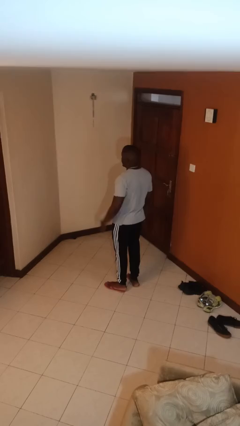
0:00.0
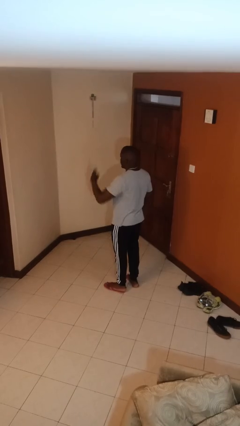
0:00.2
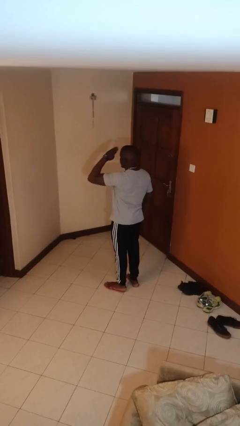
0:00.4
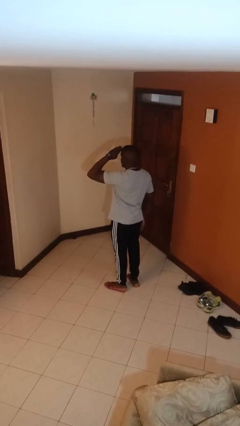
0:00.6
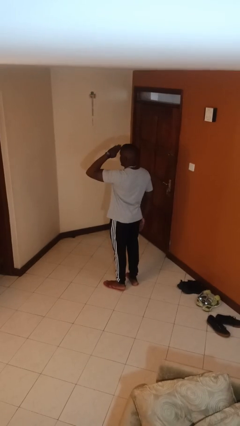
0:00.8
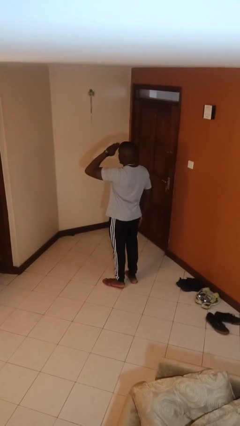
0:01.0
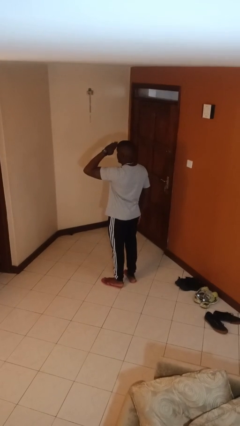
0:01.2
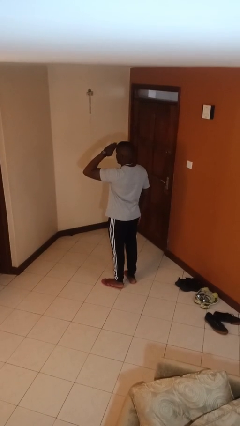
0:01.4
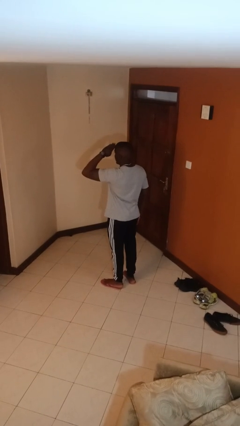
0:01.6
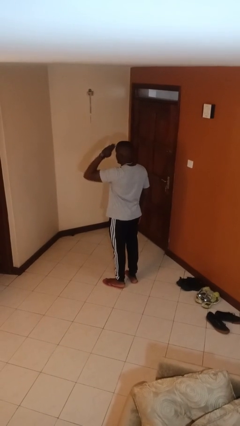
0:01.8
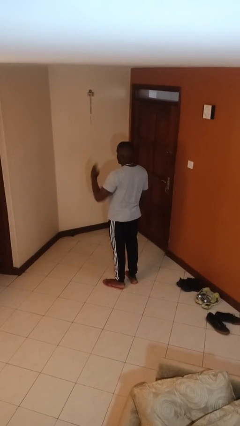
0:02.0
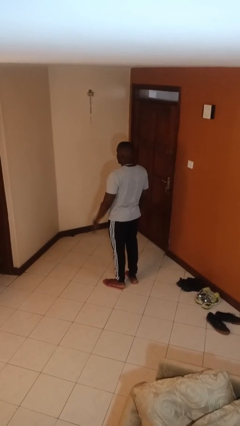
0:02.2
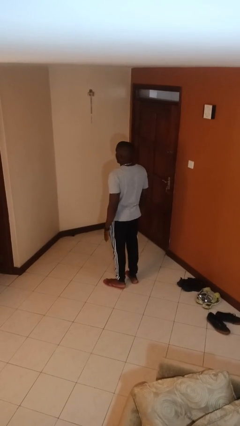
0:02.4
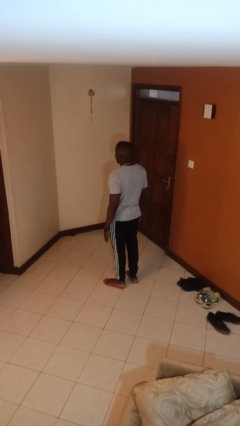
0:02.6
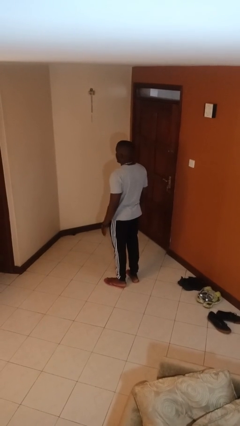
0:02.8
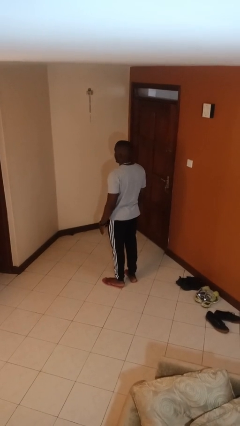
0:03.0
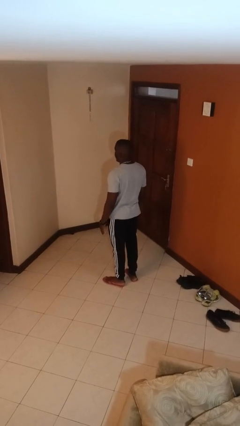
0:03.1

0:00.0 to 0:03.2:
person salutes

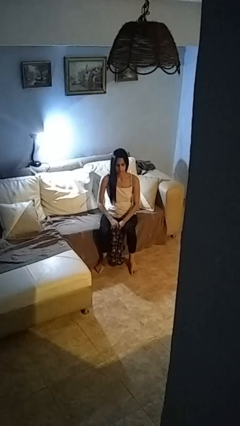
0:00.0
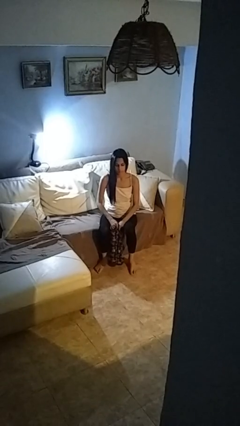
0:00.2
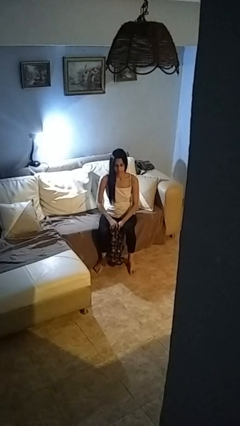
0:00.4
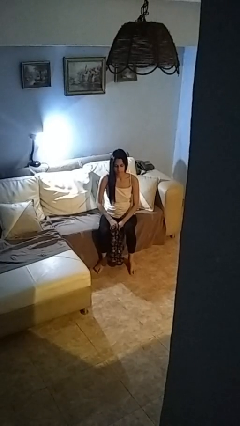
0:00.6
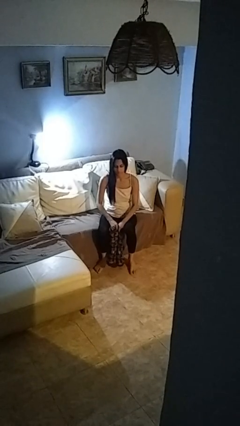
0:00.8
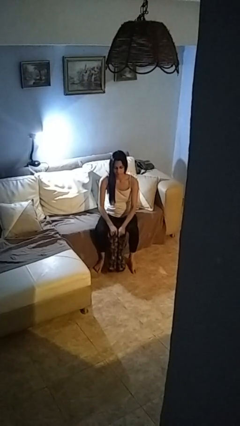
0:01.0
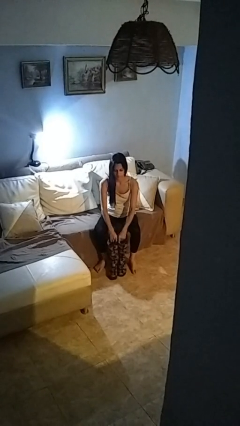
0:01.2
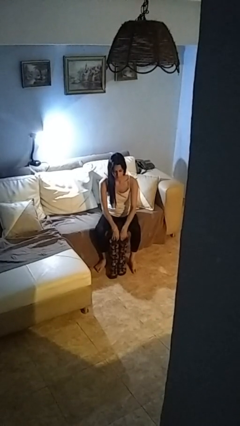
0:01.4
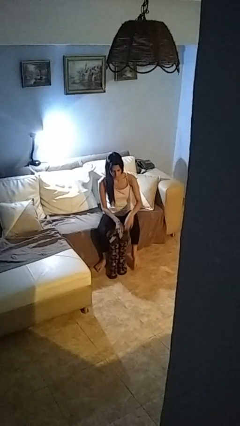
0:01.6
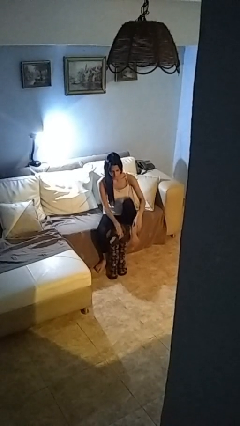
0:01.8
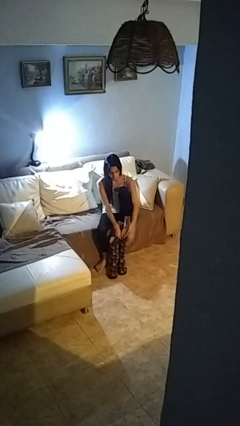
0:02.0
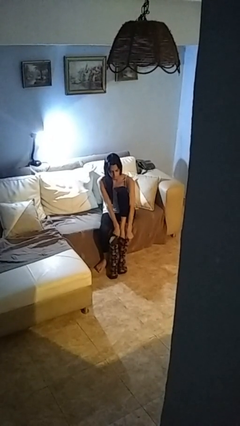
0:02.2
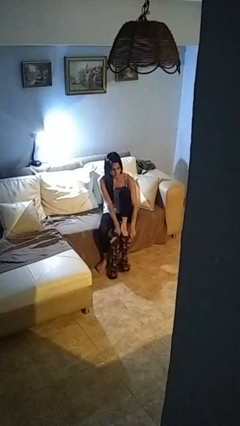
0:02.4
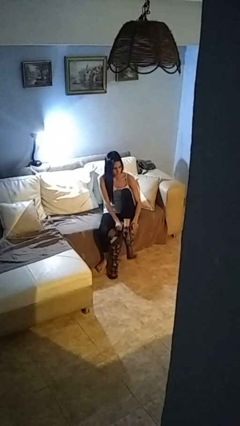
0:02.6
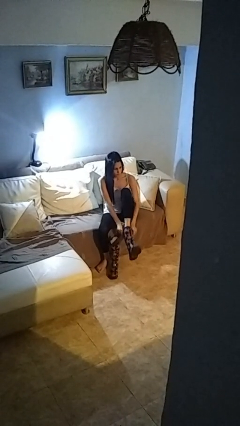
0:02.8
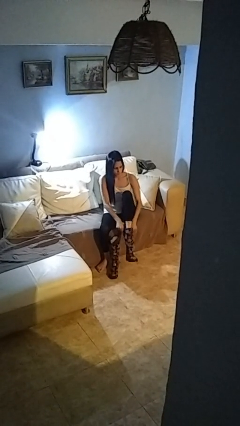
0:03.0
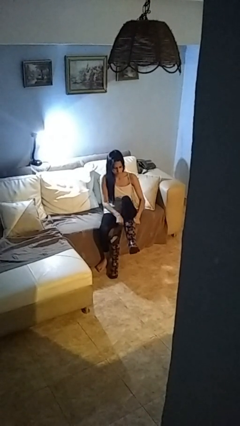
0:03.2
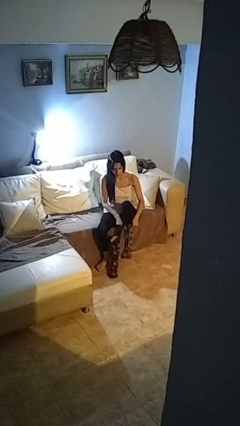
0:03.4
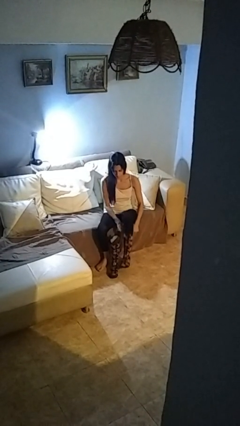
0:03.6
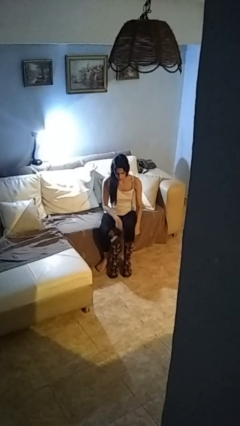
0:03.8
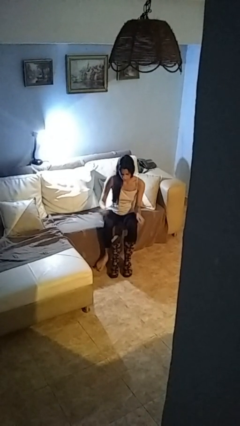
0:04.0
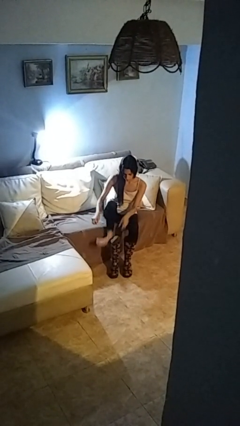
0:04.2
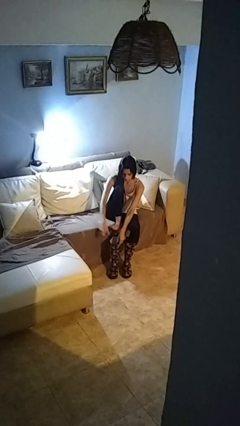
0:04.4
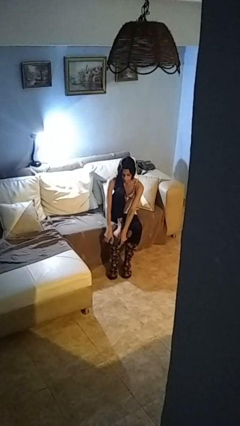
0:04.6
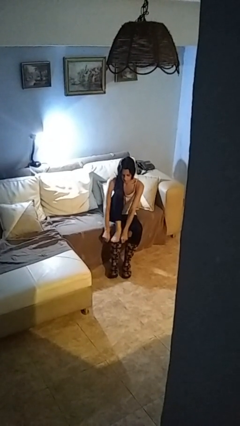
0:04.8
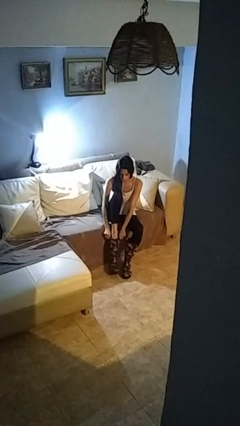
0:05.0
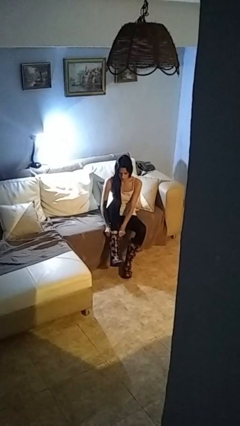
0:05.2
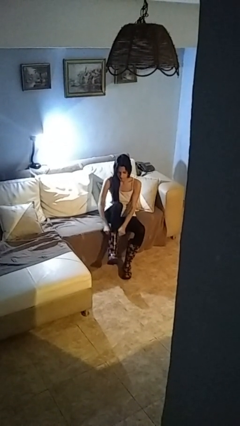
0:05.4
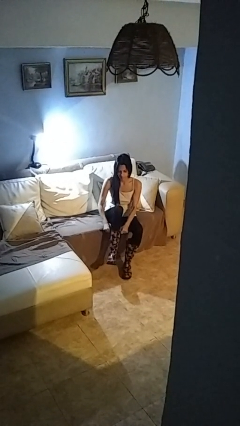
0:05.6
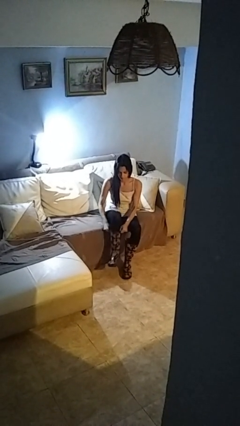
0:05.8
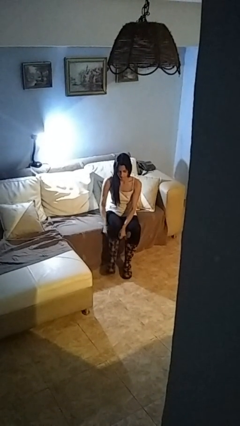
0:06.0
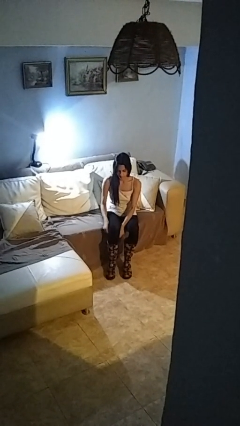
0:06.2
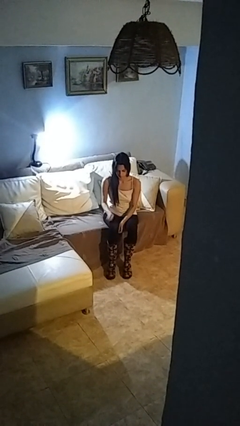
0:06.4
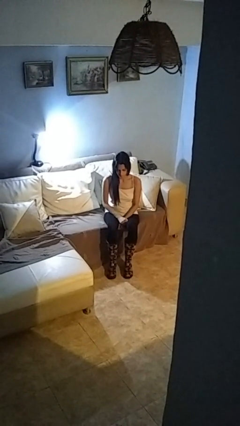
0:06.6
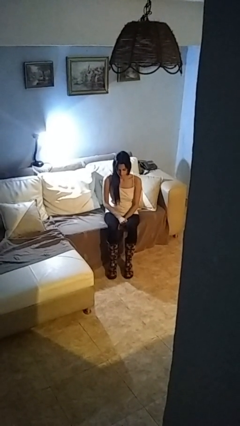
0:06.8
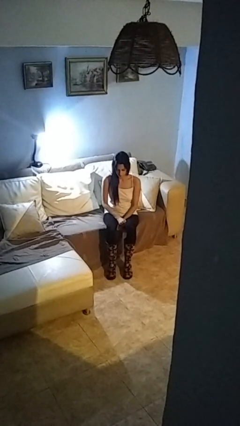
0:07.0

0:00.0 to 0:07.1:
person puts on boots

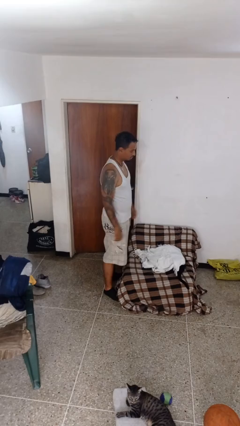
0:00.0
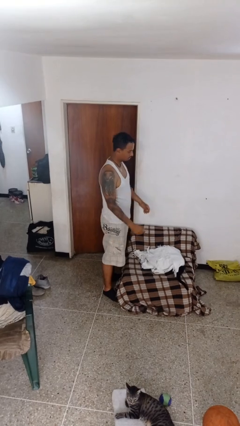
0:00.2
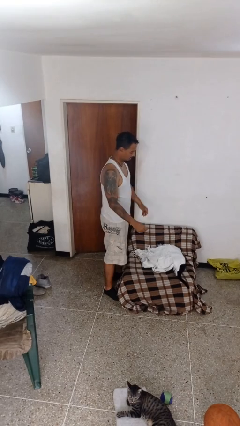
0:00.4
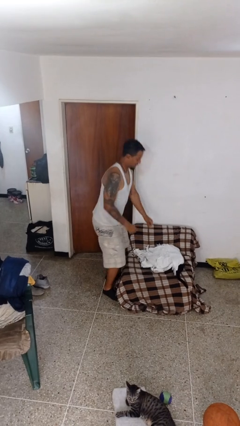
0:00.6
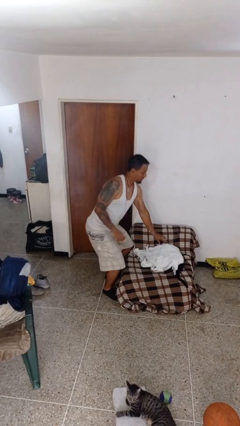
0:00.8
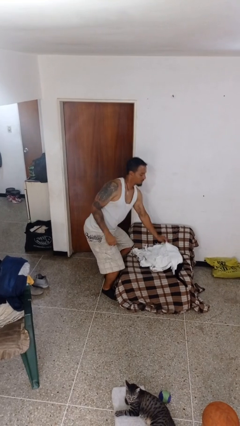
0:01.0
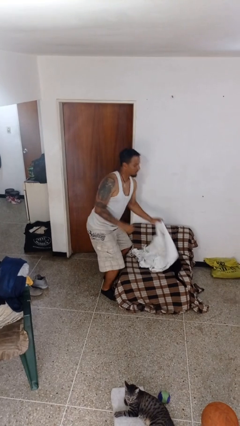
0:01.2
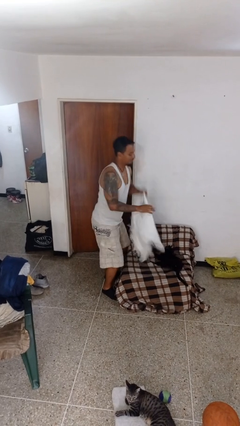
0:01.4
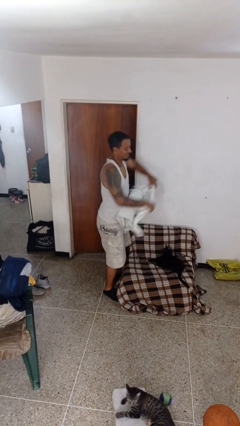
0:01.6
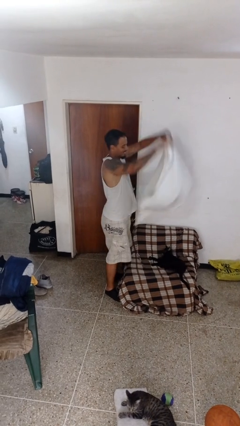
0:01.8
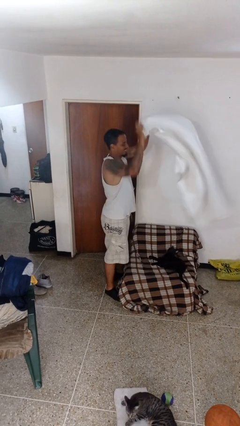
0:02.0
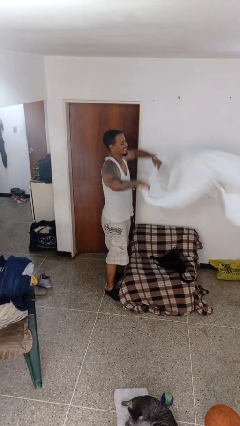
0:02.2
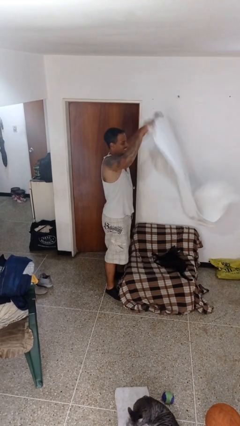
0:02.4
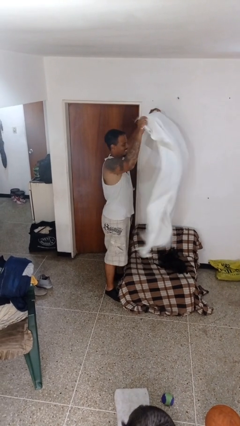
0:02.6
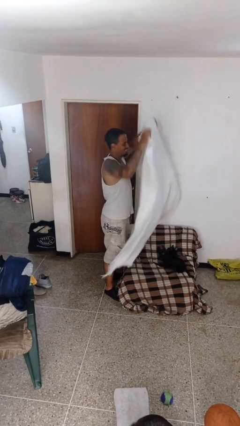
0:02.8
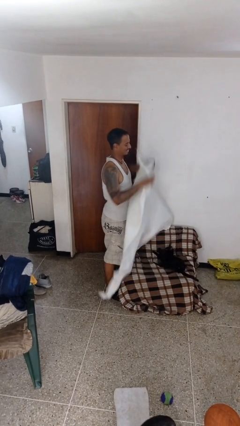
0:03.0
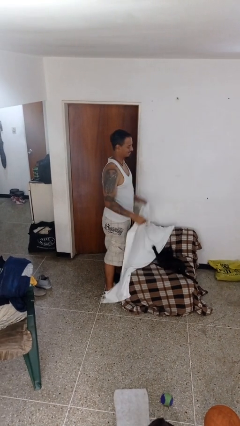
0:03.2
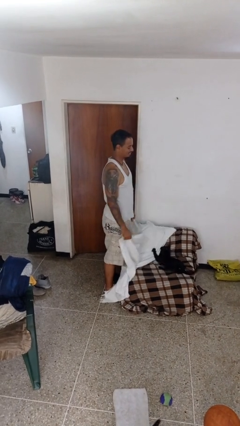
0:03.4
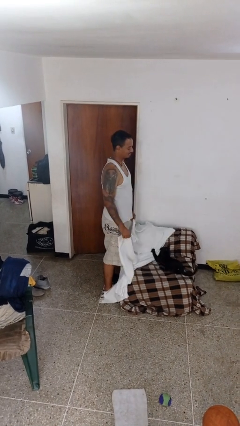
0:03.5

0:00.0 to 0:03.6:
person unfolds blanket

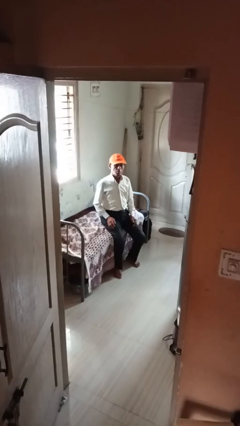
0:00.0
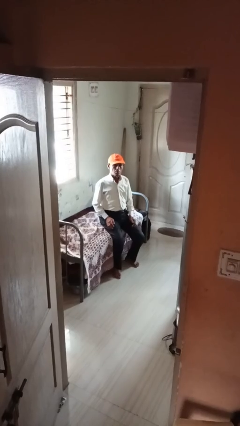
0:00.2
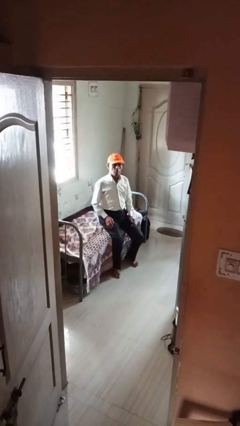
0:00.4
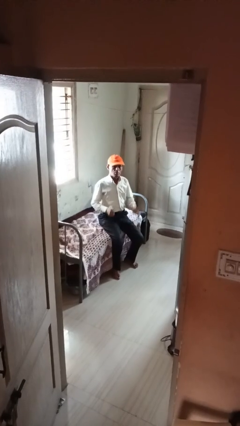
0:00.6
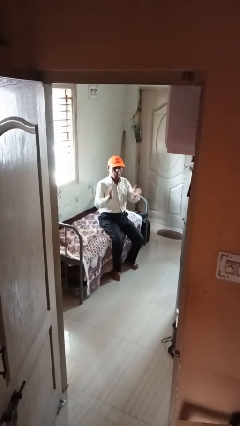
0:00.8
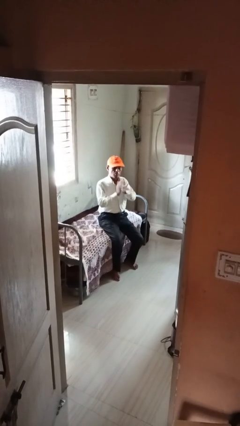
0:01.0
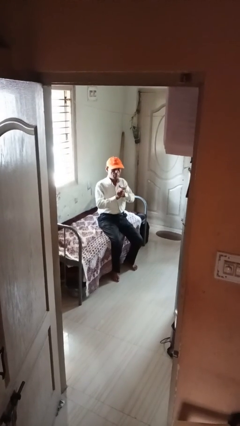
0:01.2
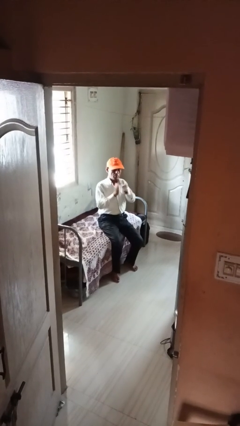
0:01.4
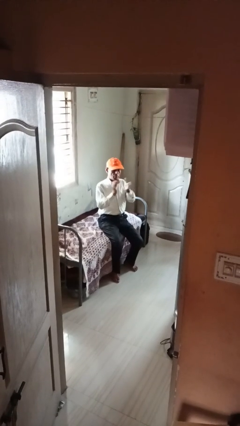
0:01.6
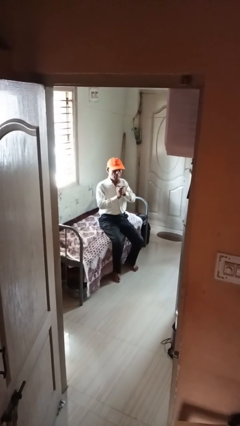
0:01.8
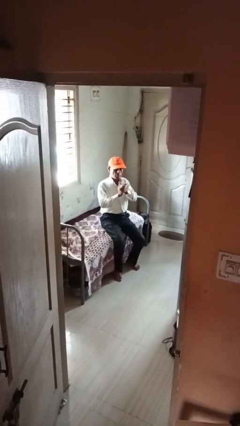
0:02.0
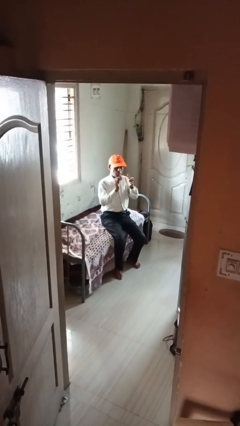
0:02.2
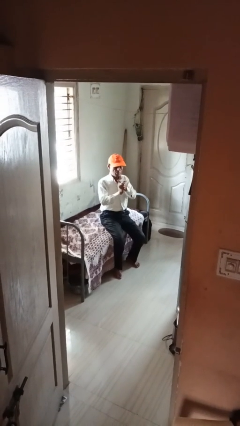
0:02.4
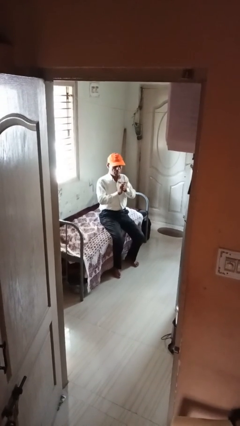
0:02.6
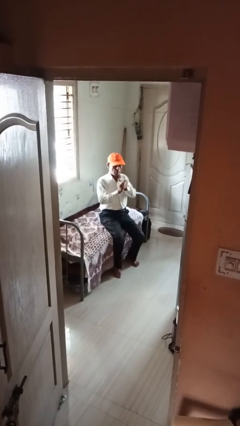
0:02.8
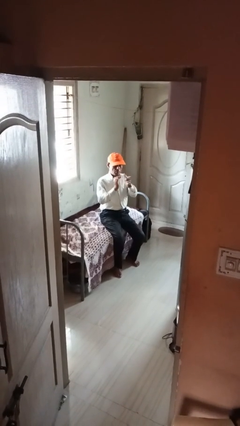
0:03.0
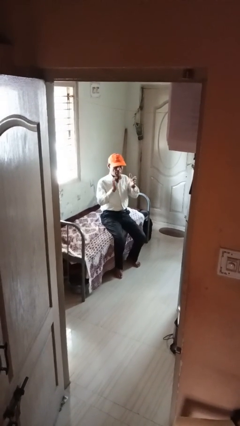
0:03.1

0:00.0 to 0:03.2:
person claps hands

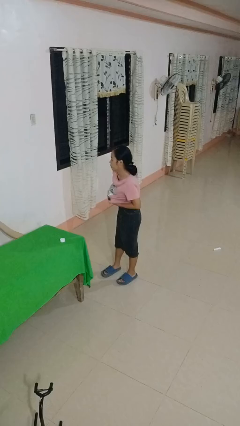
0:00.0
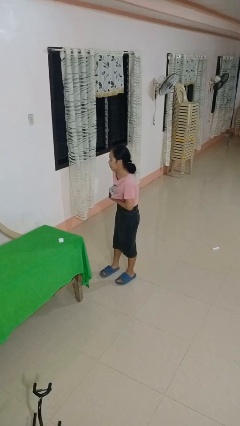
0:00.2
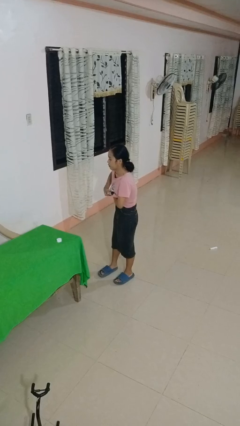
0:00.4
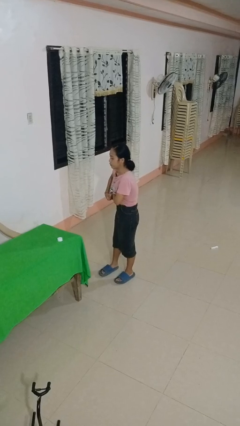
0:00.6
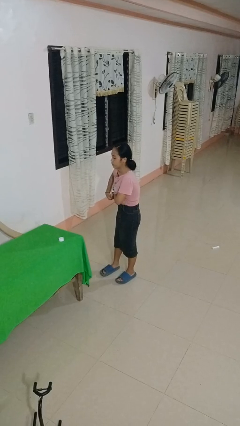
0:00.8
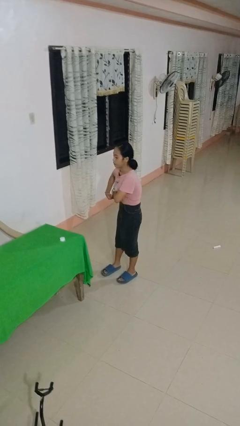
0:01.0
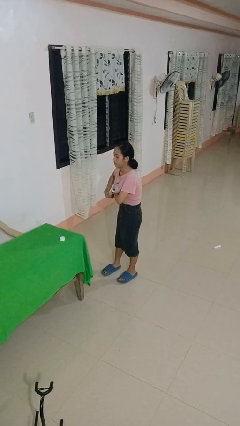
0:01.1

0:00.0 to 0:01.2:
person applies deodorant
